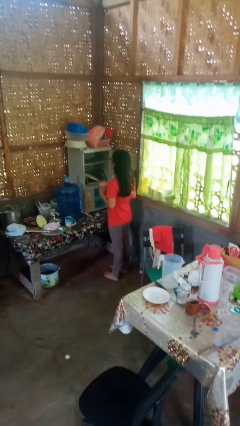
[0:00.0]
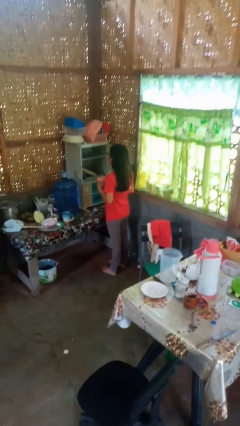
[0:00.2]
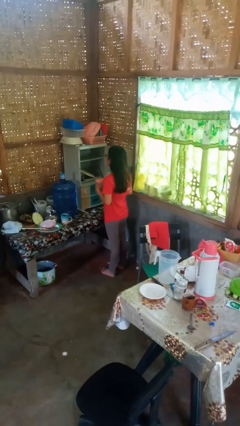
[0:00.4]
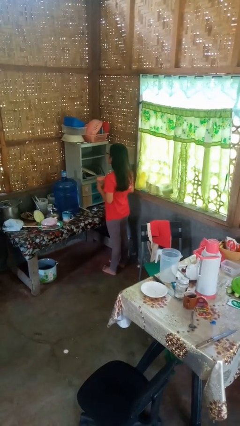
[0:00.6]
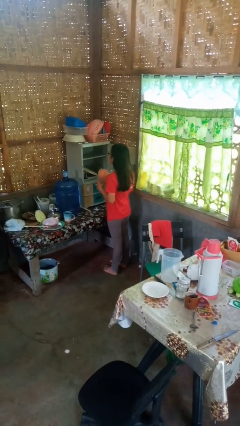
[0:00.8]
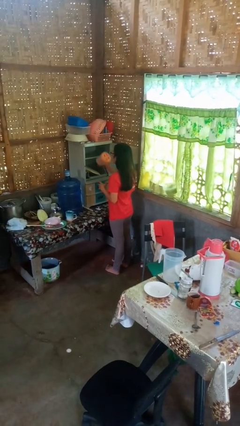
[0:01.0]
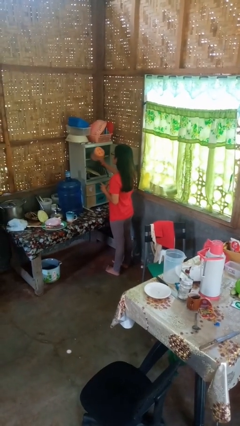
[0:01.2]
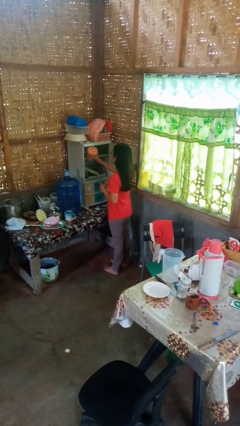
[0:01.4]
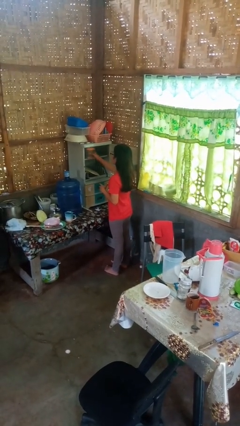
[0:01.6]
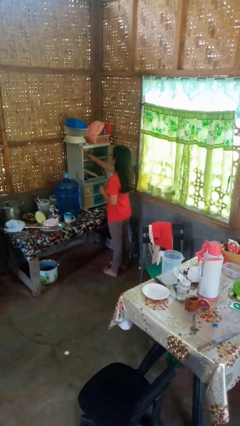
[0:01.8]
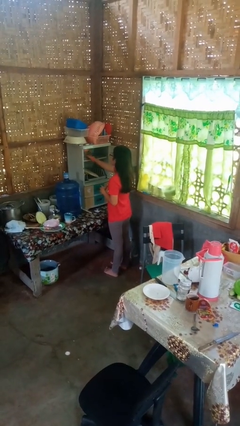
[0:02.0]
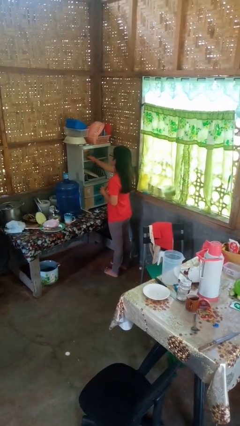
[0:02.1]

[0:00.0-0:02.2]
person puts down object into cabinet

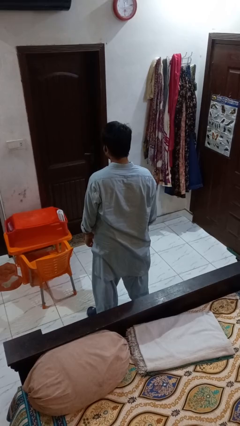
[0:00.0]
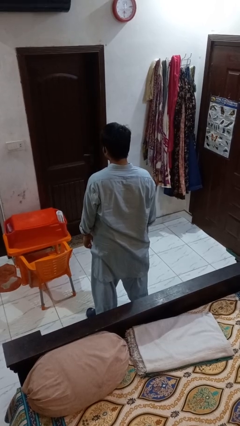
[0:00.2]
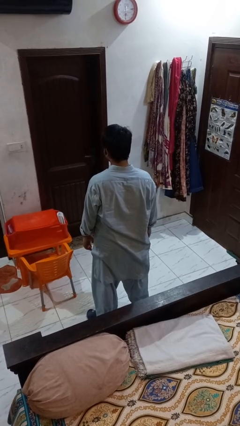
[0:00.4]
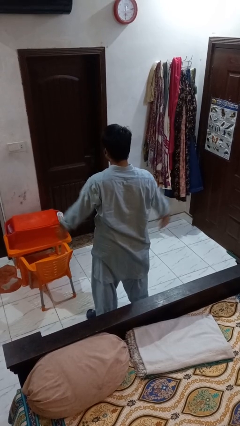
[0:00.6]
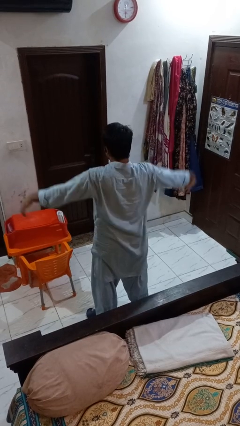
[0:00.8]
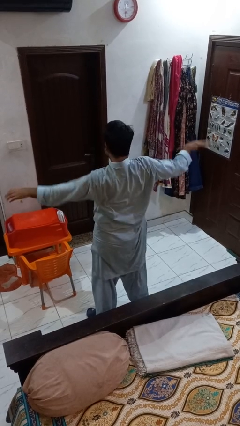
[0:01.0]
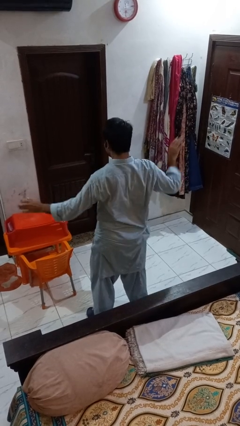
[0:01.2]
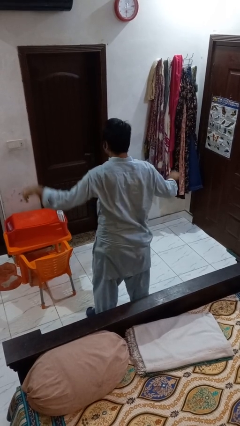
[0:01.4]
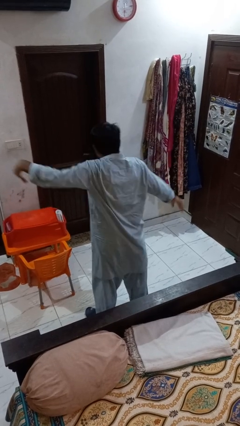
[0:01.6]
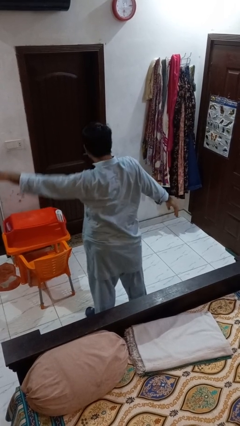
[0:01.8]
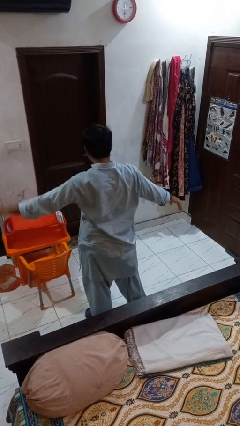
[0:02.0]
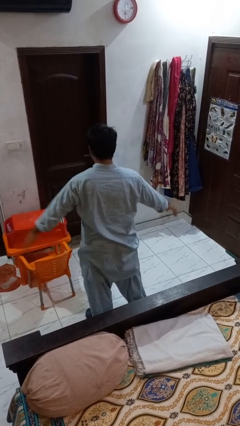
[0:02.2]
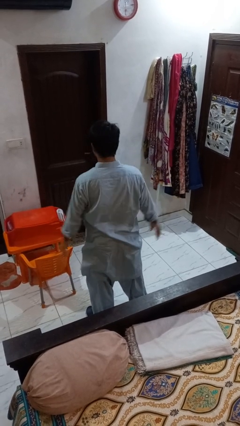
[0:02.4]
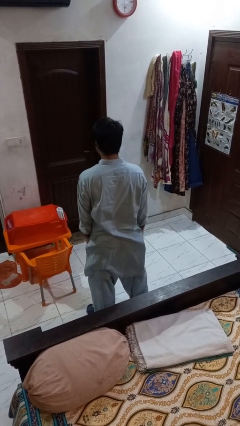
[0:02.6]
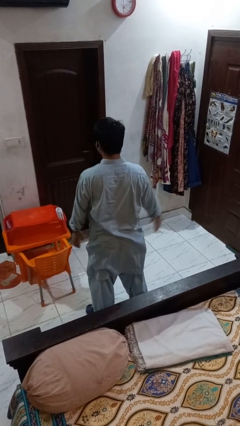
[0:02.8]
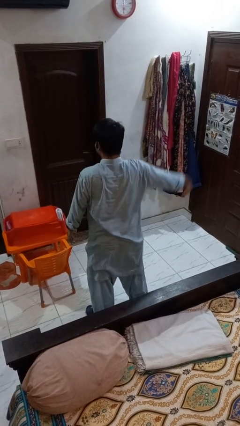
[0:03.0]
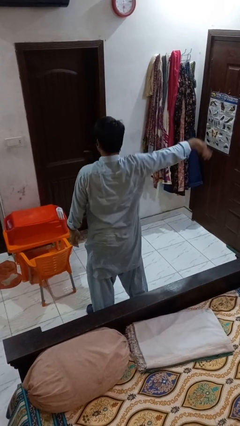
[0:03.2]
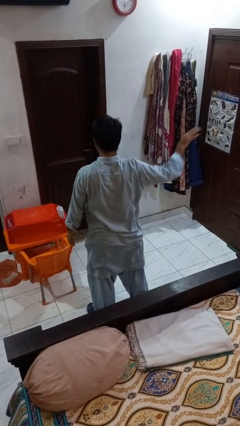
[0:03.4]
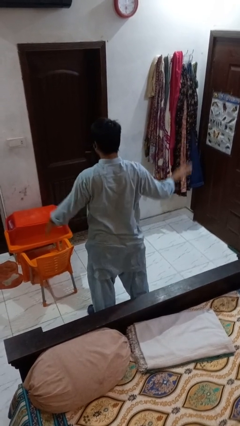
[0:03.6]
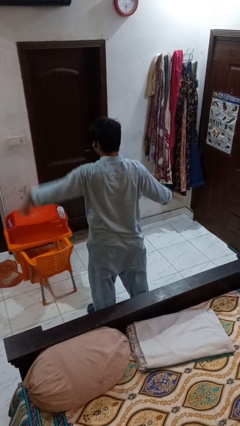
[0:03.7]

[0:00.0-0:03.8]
person dances in place

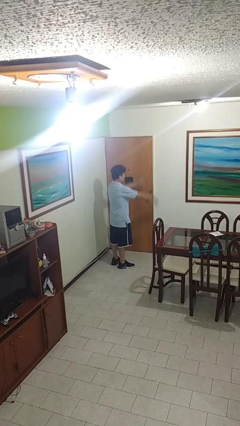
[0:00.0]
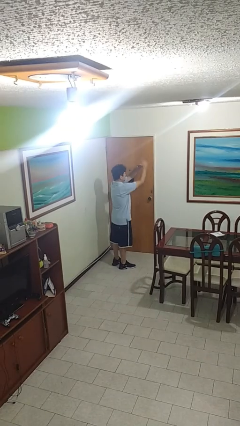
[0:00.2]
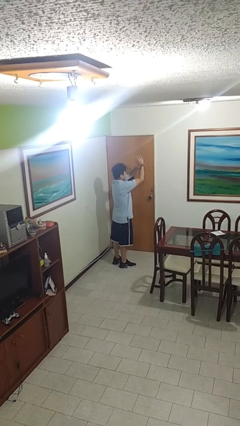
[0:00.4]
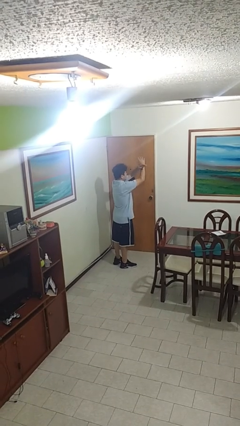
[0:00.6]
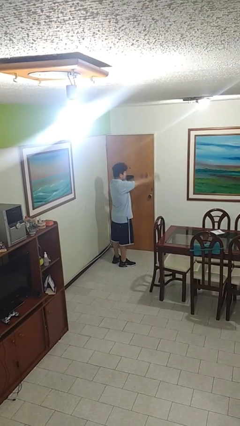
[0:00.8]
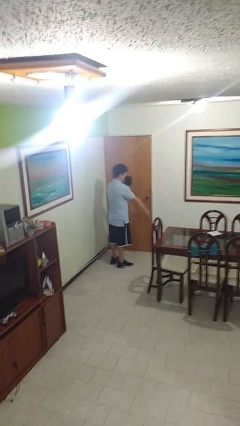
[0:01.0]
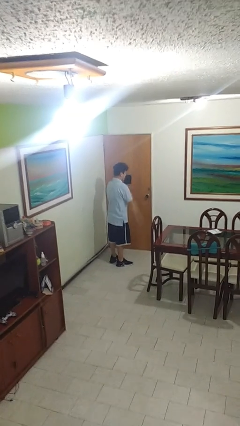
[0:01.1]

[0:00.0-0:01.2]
person gestures arms x

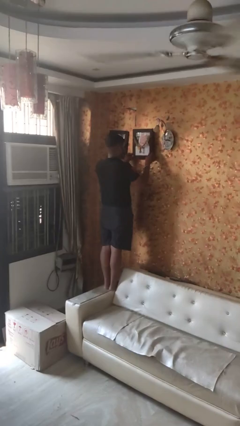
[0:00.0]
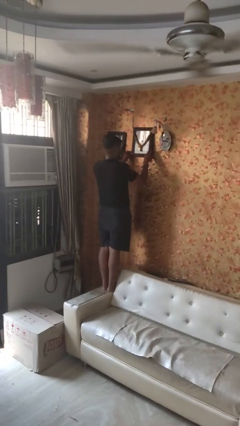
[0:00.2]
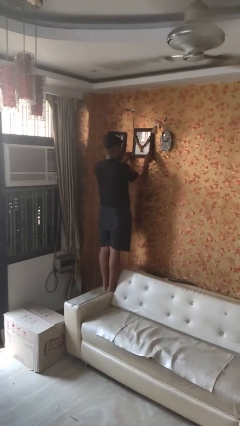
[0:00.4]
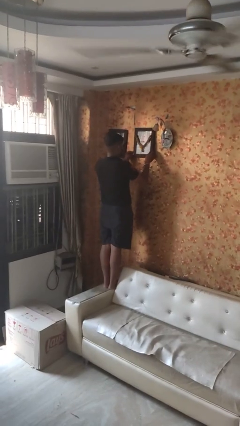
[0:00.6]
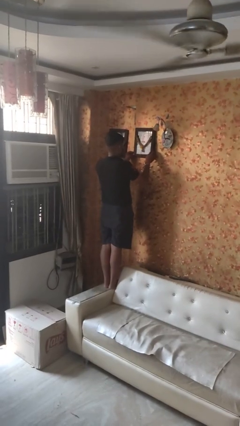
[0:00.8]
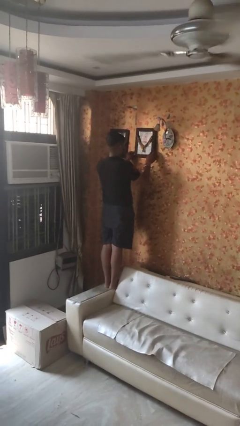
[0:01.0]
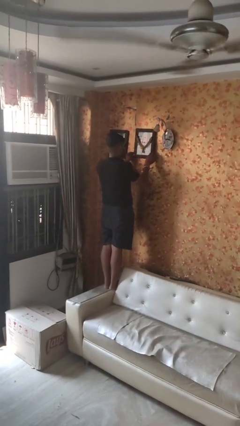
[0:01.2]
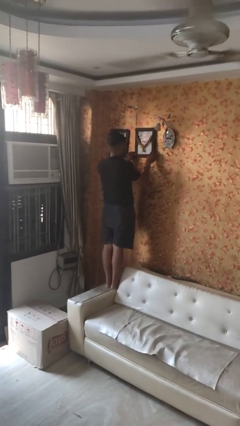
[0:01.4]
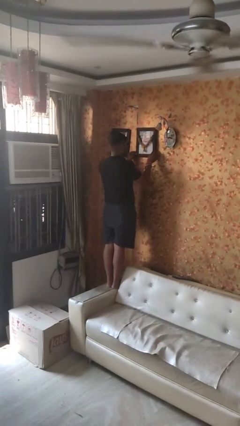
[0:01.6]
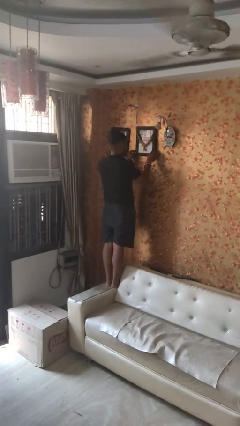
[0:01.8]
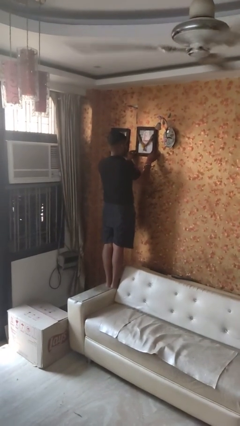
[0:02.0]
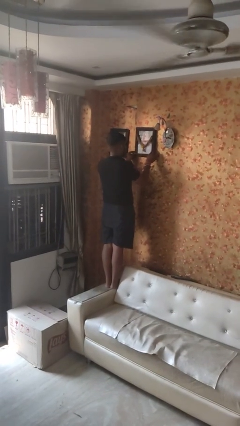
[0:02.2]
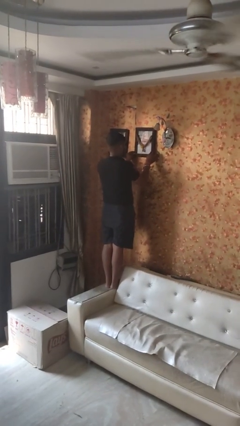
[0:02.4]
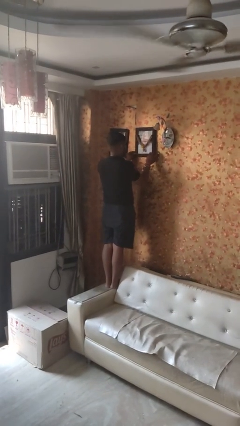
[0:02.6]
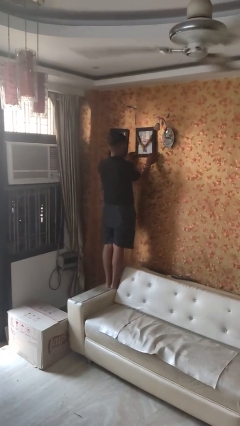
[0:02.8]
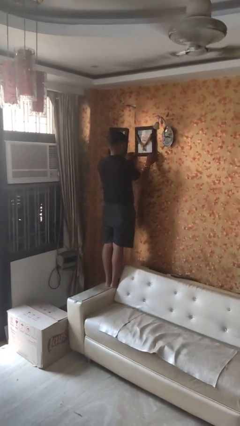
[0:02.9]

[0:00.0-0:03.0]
person puts up picture frame

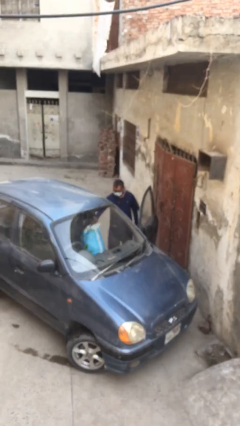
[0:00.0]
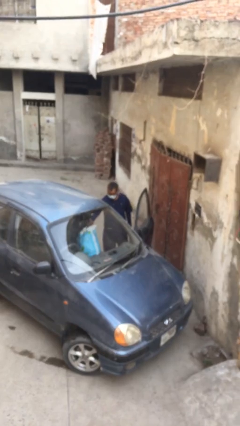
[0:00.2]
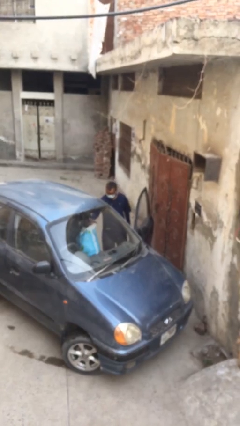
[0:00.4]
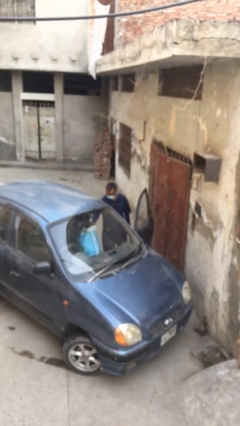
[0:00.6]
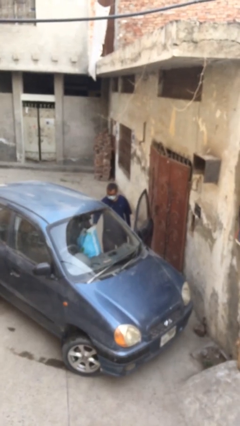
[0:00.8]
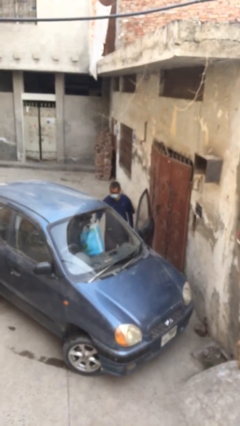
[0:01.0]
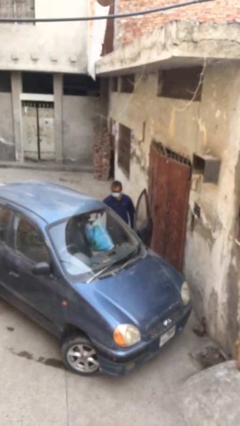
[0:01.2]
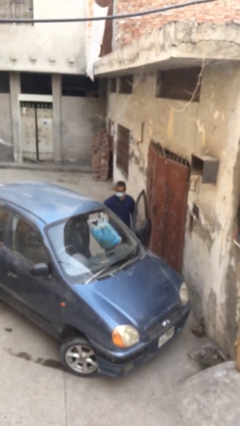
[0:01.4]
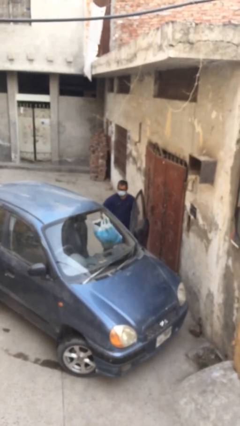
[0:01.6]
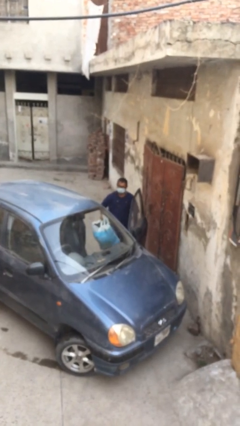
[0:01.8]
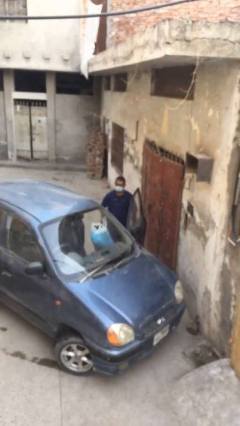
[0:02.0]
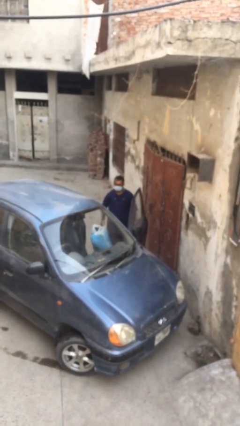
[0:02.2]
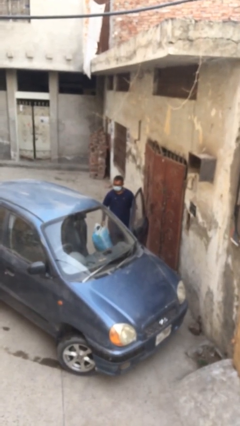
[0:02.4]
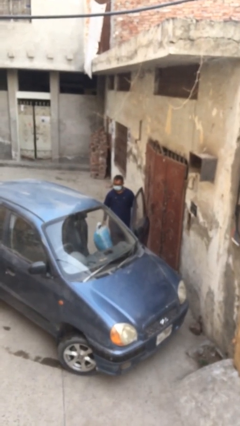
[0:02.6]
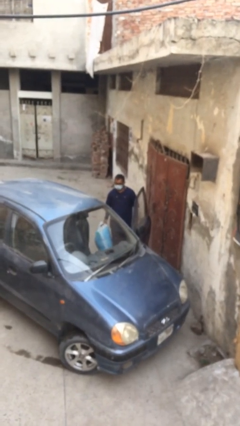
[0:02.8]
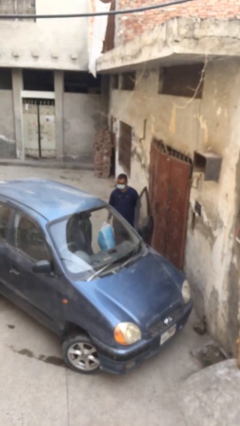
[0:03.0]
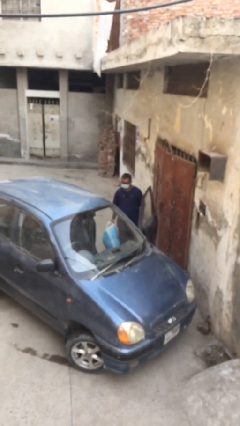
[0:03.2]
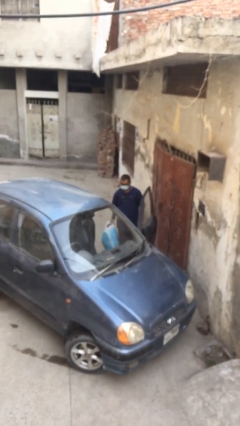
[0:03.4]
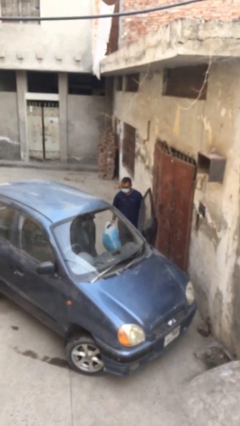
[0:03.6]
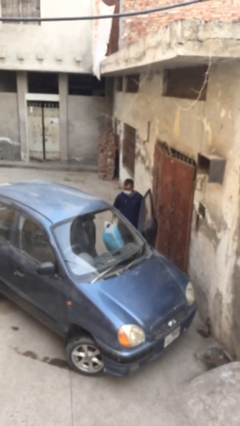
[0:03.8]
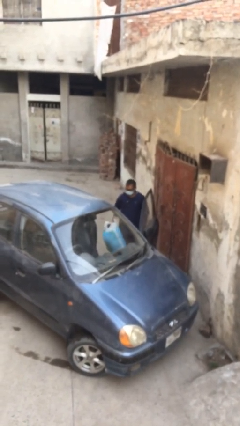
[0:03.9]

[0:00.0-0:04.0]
person unloads car

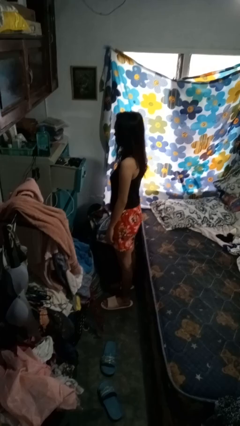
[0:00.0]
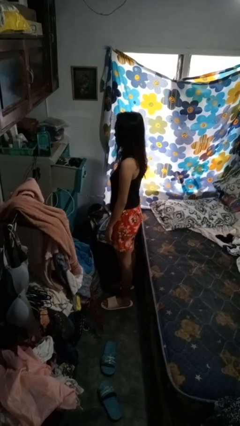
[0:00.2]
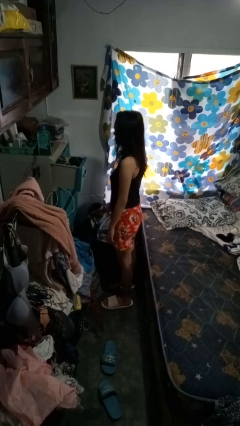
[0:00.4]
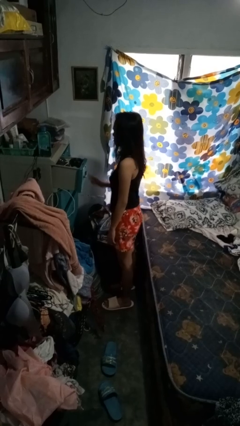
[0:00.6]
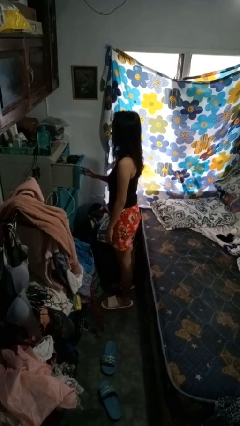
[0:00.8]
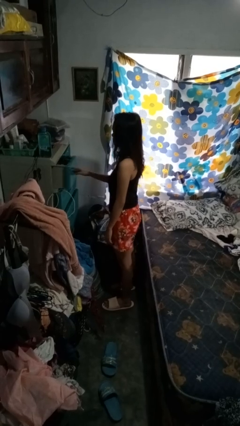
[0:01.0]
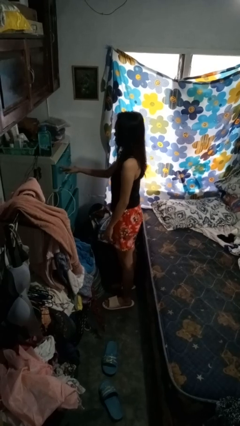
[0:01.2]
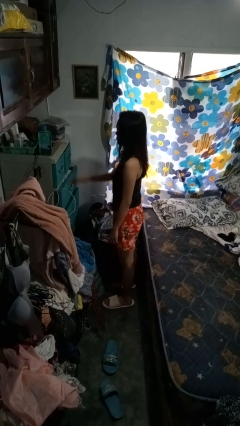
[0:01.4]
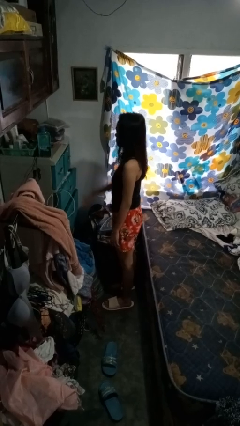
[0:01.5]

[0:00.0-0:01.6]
person closes dresser drawer

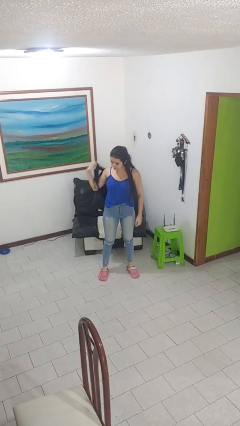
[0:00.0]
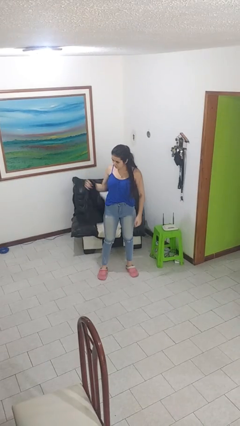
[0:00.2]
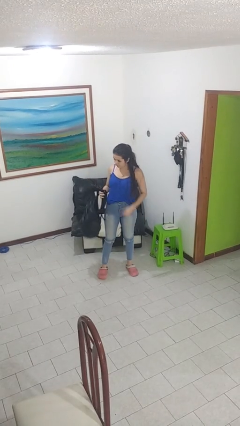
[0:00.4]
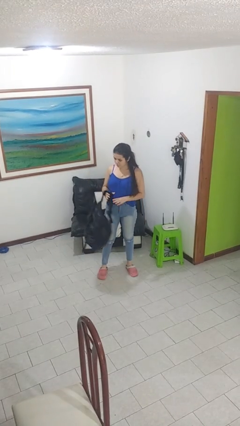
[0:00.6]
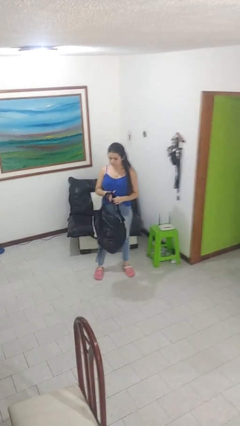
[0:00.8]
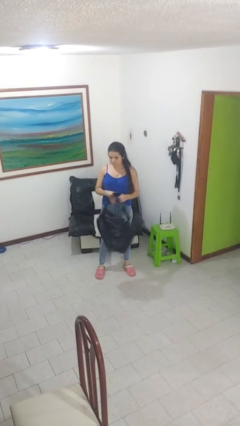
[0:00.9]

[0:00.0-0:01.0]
person takes off backpack

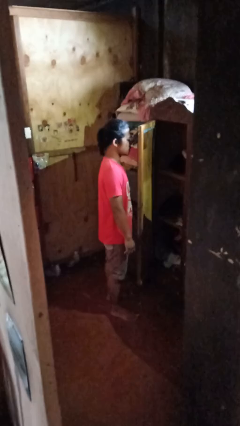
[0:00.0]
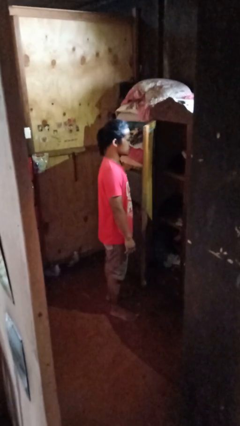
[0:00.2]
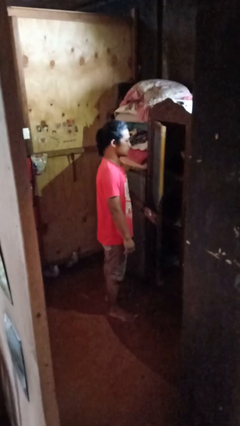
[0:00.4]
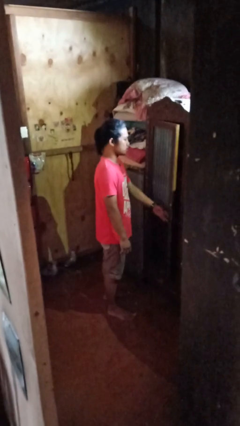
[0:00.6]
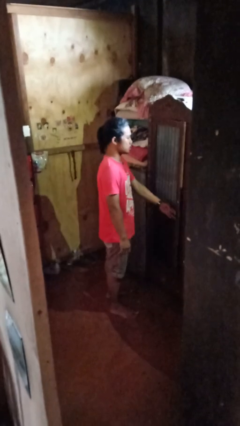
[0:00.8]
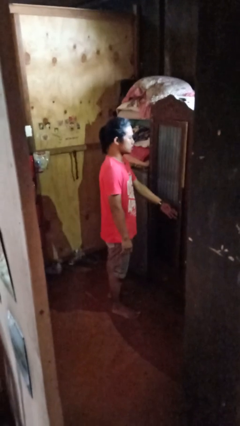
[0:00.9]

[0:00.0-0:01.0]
person closes closet door
